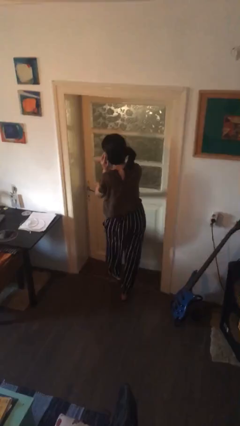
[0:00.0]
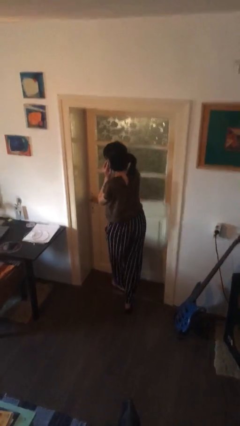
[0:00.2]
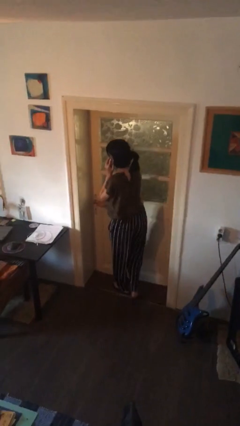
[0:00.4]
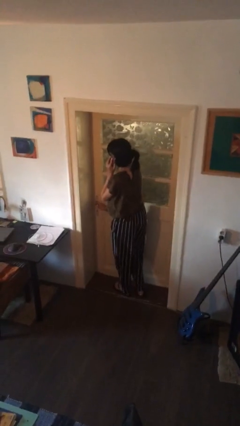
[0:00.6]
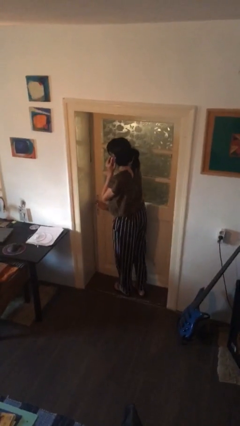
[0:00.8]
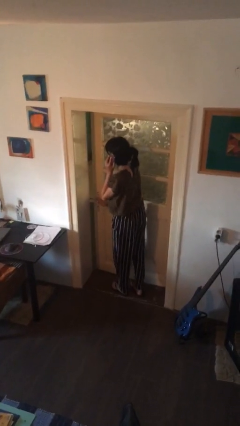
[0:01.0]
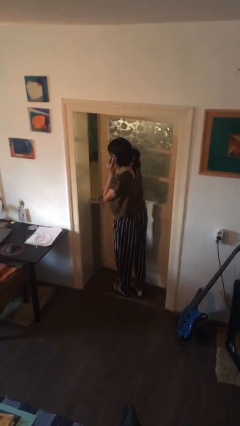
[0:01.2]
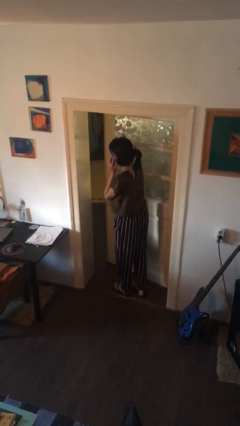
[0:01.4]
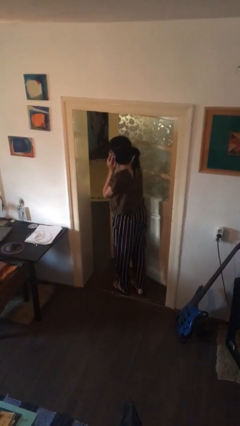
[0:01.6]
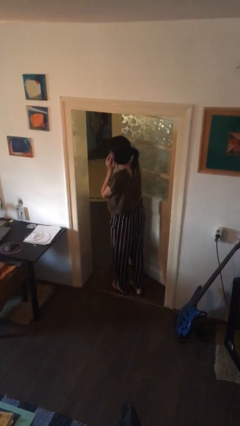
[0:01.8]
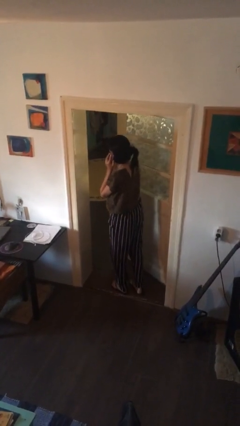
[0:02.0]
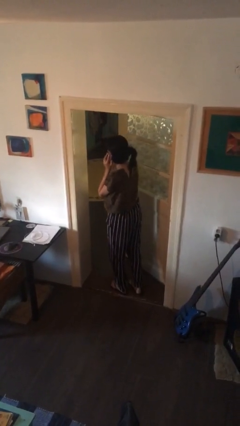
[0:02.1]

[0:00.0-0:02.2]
person opens facility door

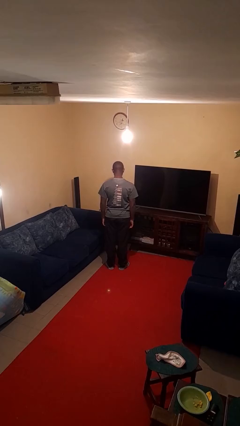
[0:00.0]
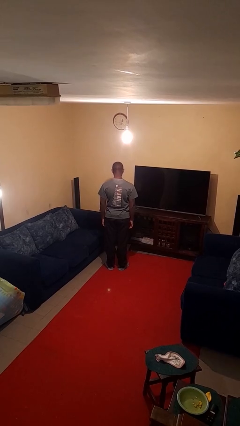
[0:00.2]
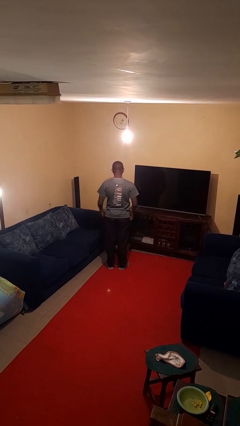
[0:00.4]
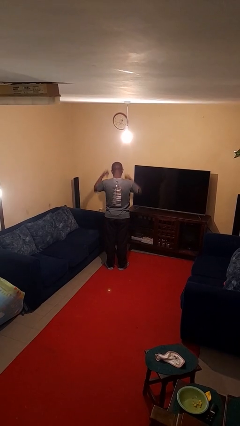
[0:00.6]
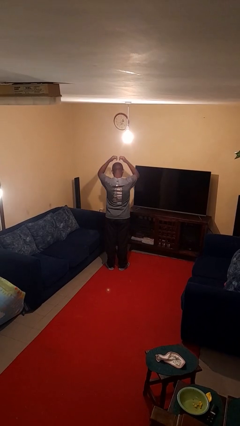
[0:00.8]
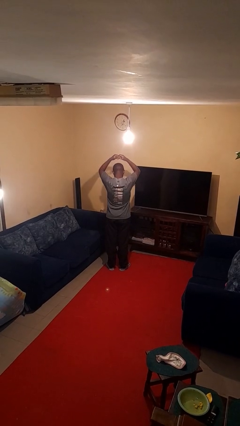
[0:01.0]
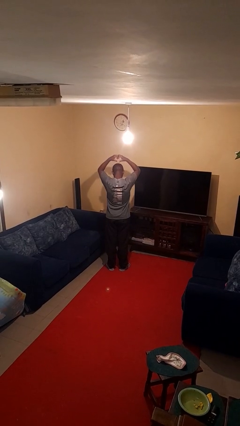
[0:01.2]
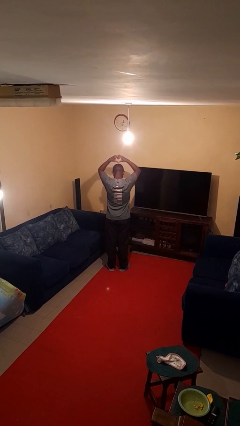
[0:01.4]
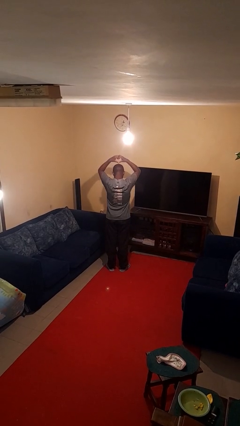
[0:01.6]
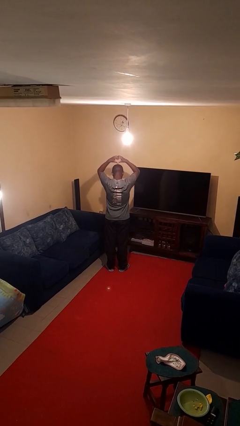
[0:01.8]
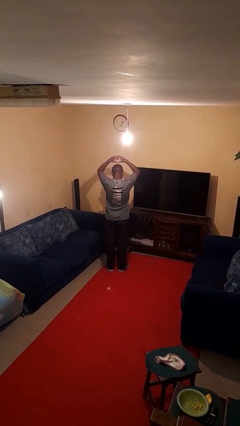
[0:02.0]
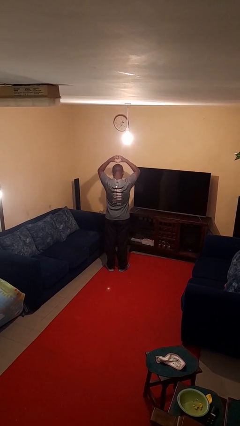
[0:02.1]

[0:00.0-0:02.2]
person gestures heart

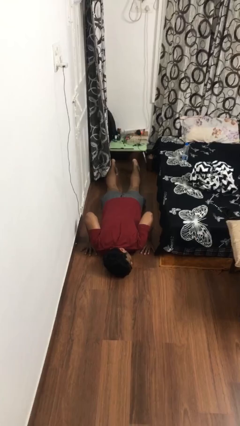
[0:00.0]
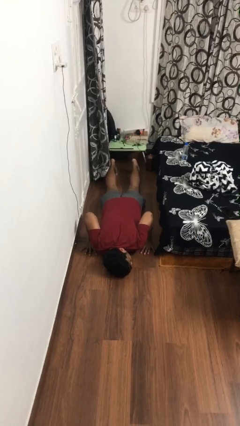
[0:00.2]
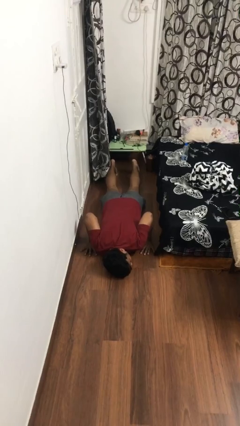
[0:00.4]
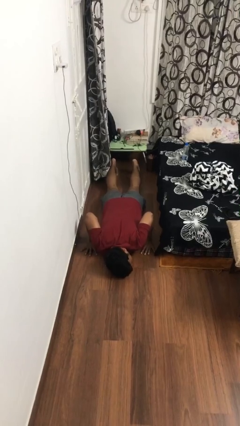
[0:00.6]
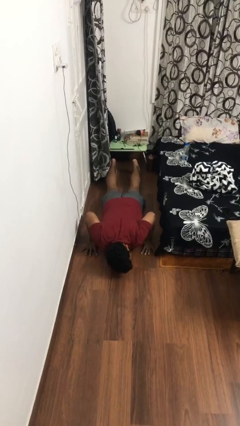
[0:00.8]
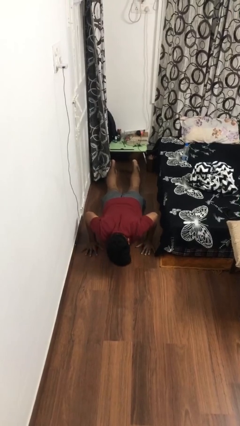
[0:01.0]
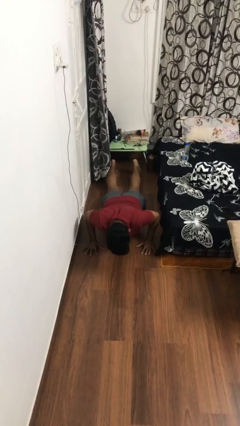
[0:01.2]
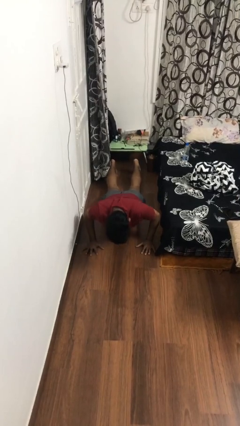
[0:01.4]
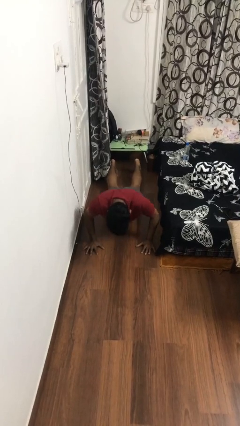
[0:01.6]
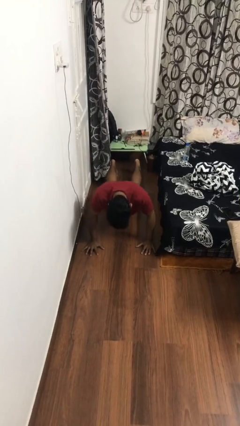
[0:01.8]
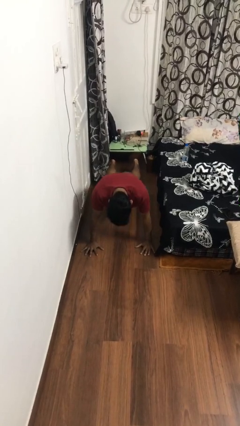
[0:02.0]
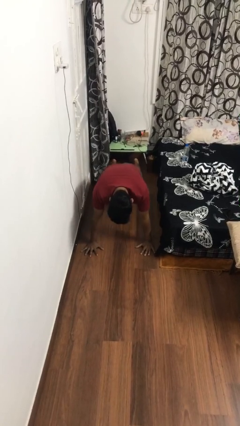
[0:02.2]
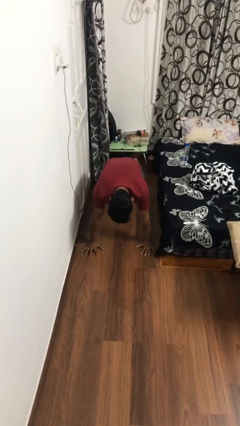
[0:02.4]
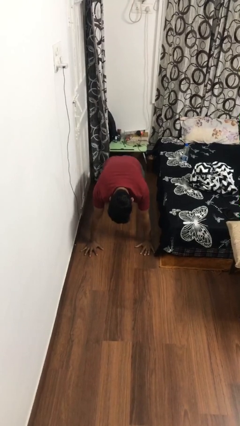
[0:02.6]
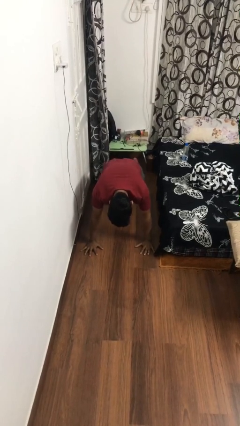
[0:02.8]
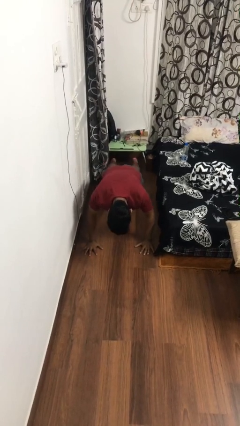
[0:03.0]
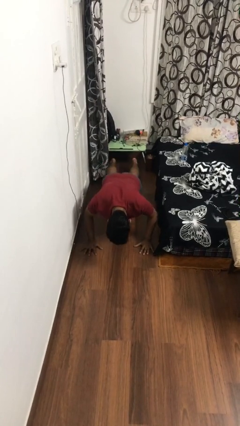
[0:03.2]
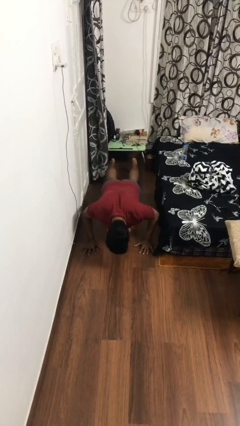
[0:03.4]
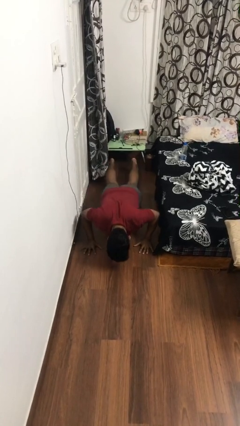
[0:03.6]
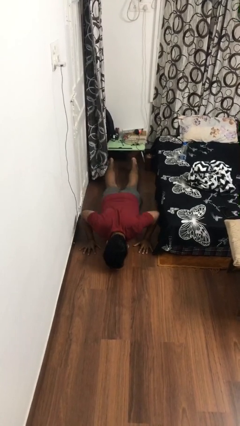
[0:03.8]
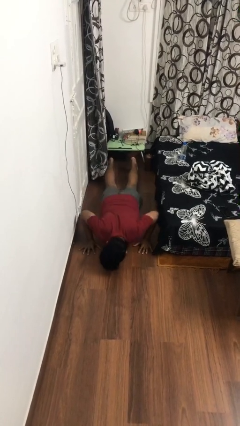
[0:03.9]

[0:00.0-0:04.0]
person exercises with pushup

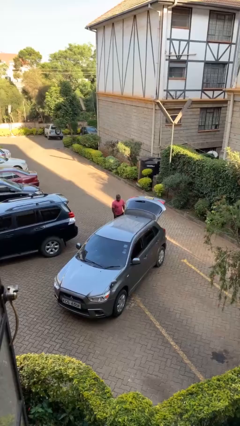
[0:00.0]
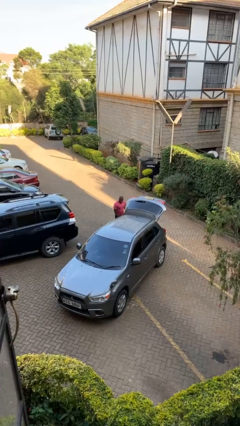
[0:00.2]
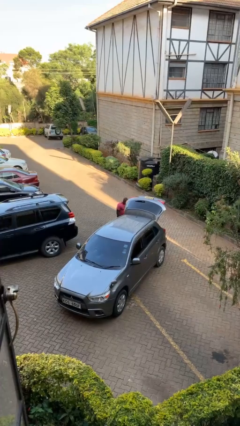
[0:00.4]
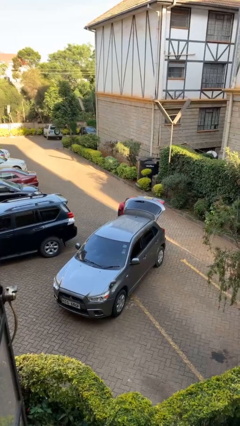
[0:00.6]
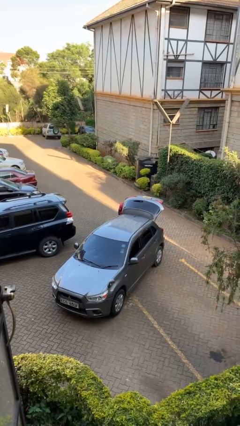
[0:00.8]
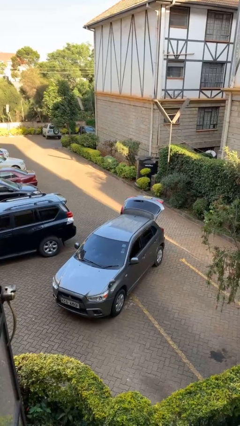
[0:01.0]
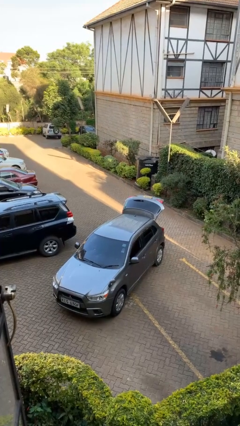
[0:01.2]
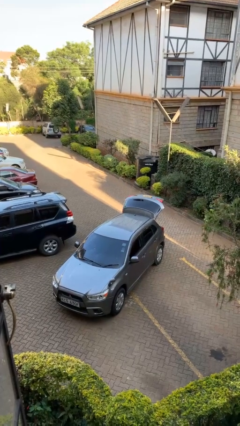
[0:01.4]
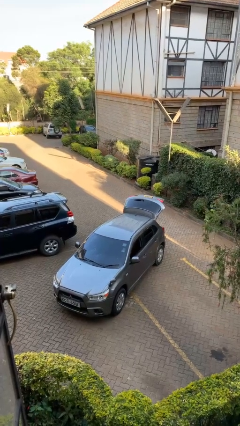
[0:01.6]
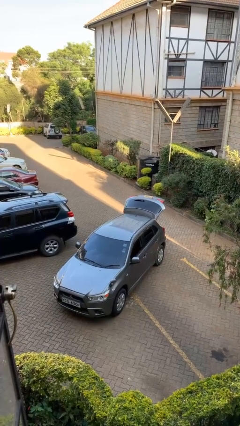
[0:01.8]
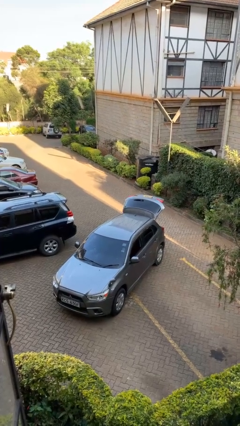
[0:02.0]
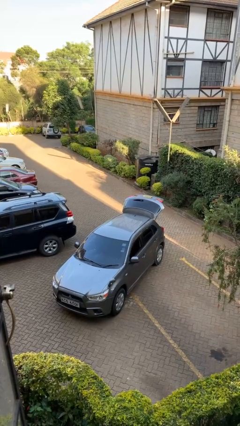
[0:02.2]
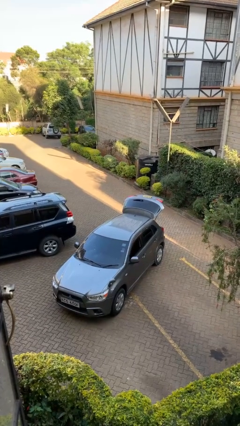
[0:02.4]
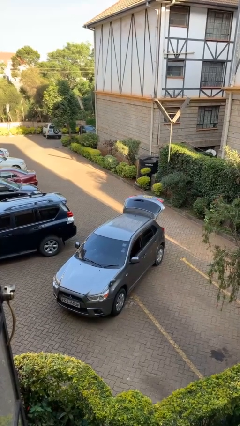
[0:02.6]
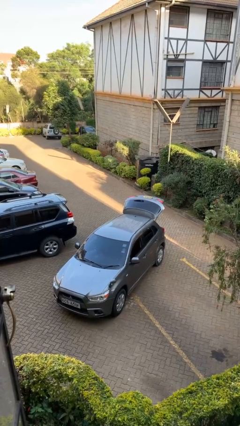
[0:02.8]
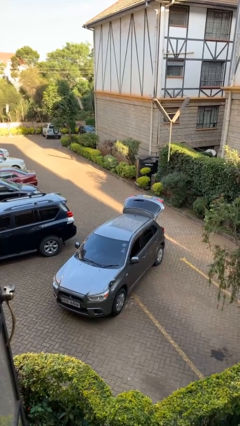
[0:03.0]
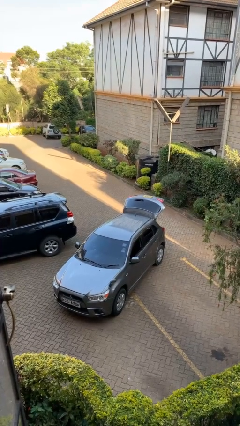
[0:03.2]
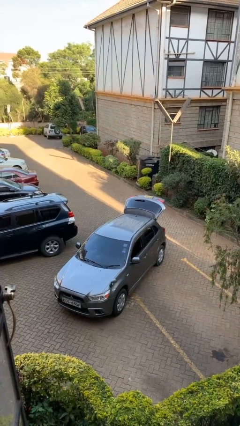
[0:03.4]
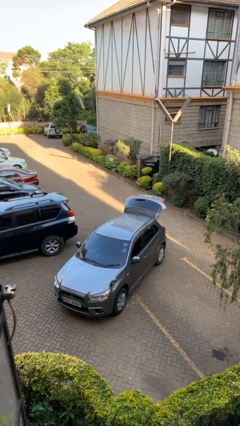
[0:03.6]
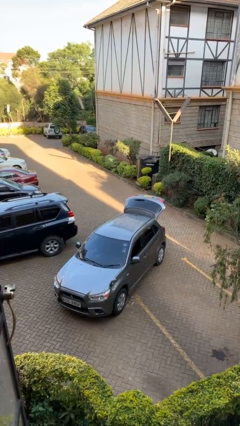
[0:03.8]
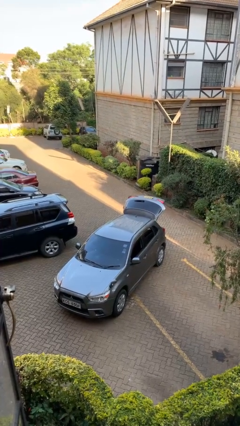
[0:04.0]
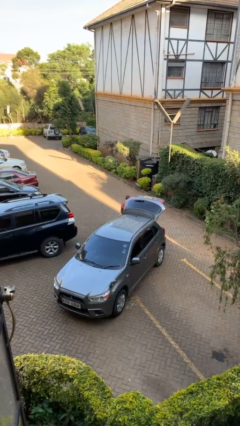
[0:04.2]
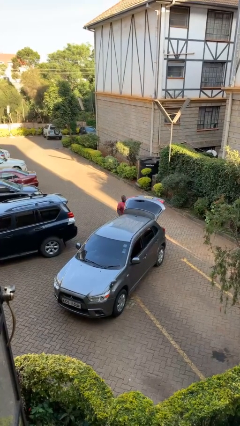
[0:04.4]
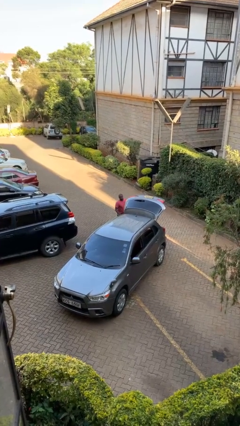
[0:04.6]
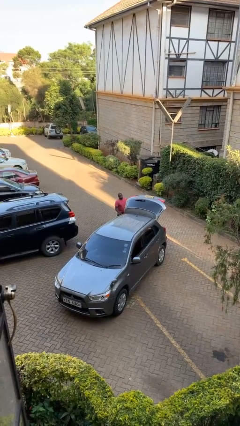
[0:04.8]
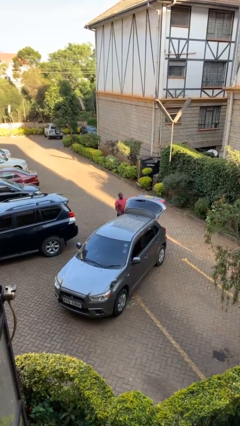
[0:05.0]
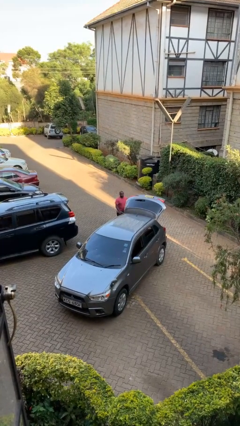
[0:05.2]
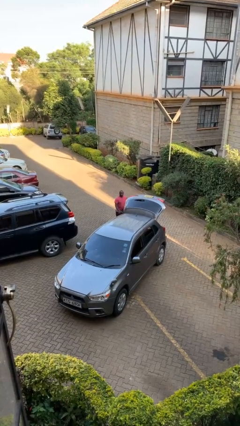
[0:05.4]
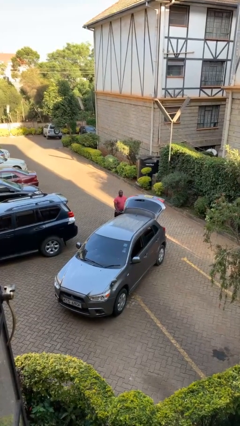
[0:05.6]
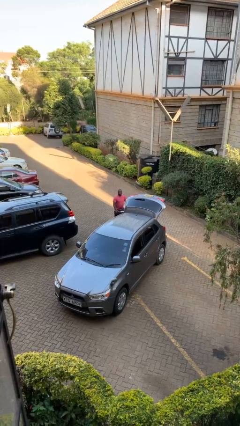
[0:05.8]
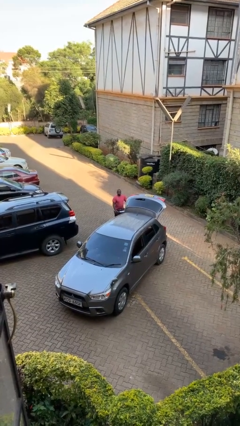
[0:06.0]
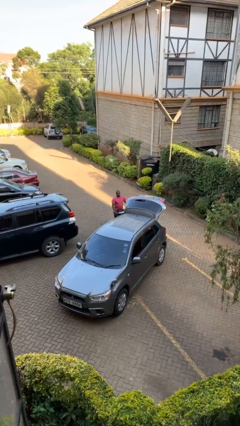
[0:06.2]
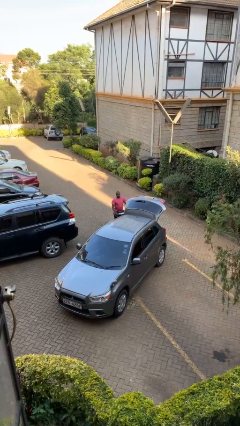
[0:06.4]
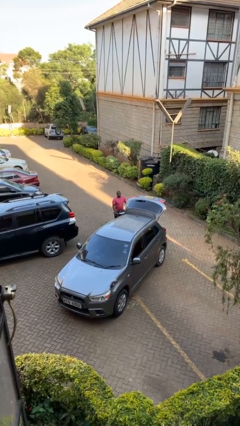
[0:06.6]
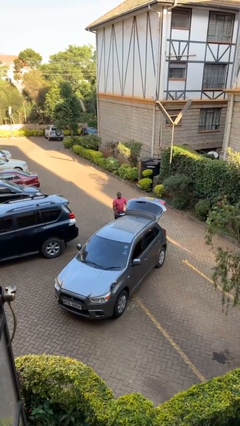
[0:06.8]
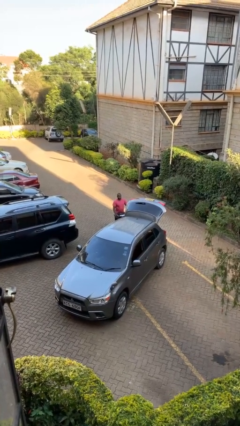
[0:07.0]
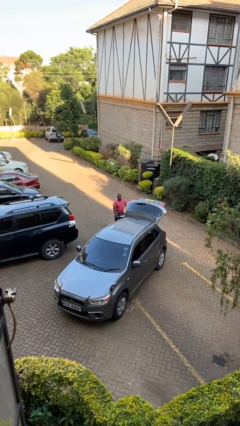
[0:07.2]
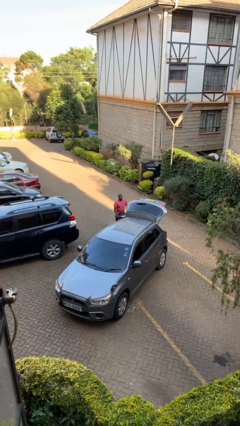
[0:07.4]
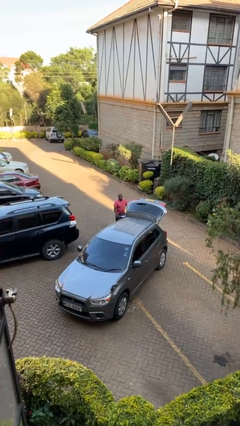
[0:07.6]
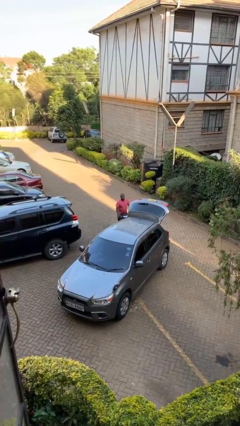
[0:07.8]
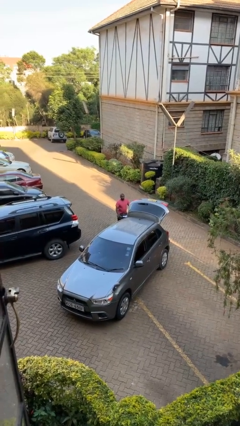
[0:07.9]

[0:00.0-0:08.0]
person unloads car

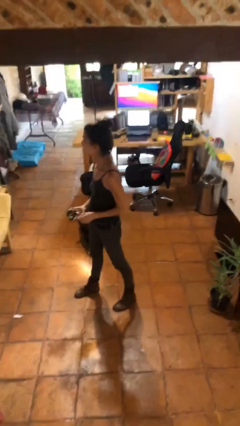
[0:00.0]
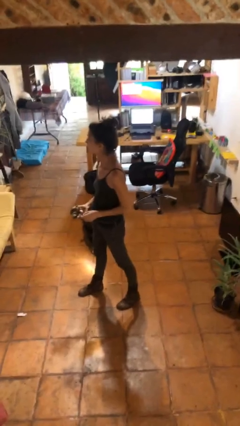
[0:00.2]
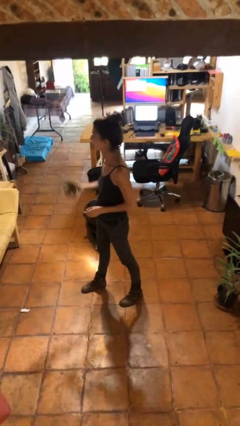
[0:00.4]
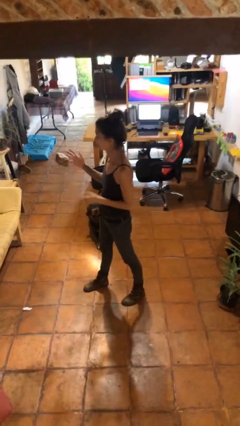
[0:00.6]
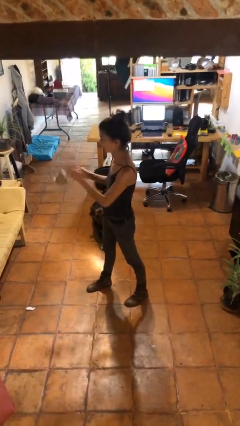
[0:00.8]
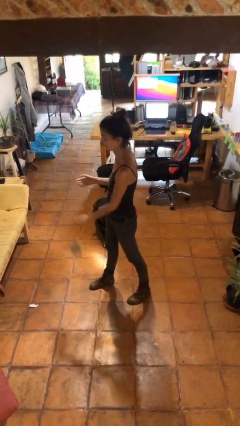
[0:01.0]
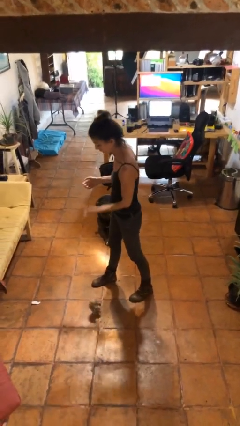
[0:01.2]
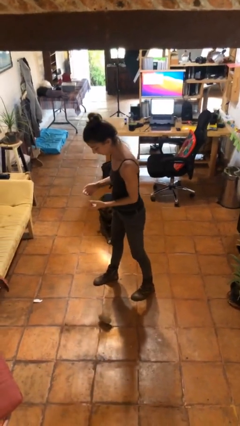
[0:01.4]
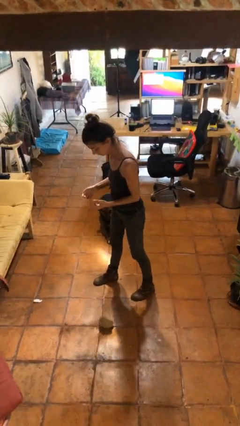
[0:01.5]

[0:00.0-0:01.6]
person drops object
